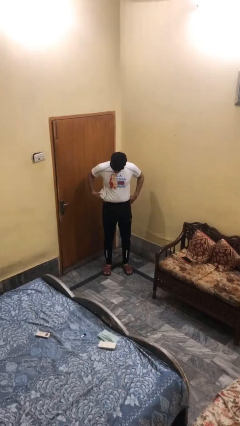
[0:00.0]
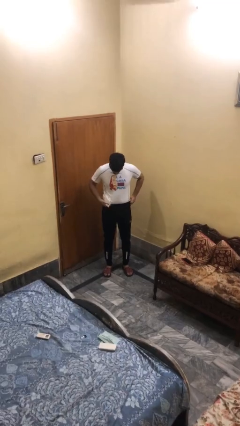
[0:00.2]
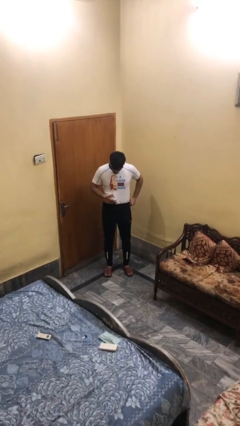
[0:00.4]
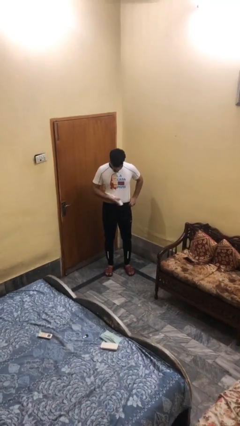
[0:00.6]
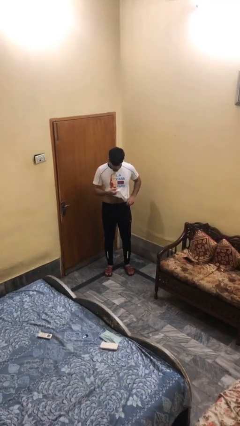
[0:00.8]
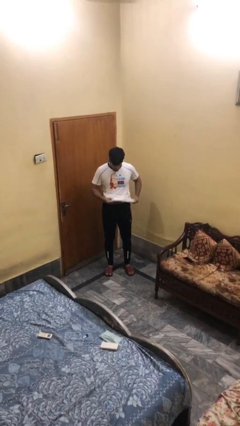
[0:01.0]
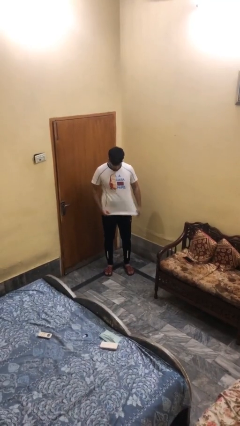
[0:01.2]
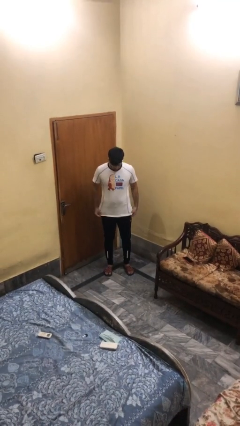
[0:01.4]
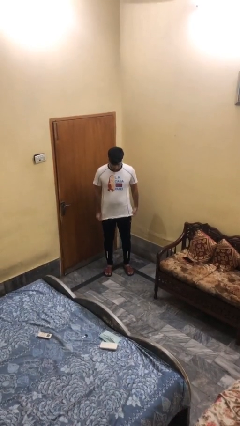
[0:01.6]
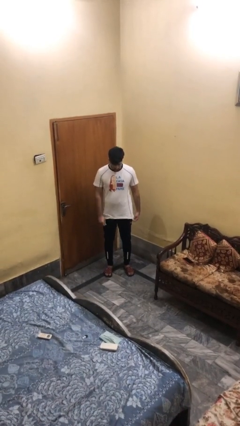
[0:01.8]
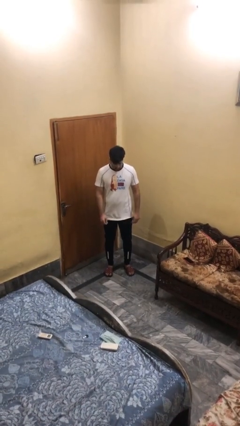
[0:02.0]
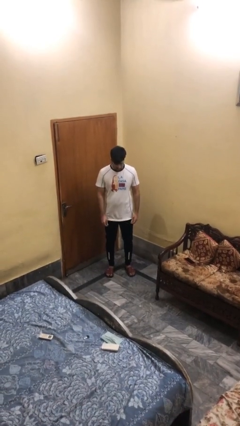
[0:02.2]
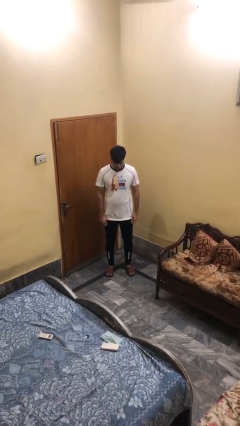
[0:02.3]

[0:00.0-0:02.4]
person untucks shirt

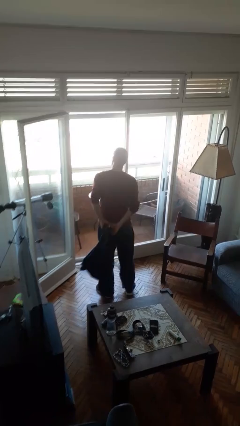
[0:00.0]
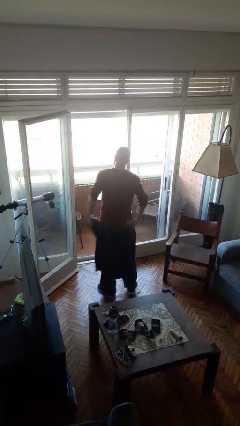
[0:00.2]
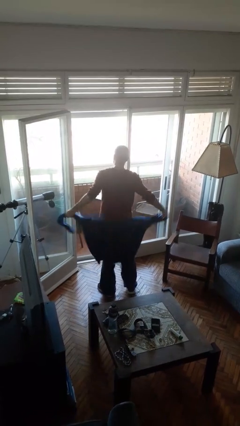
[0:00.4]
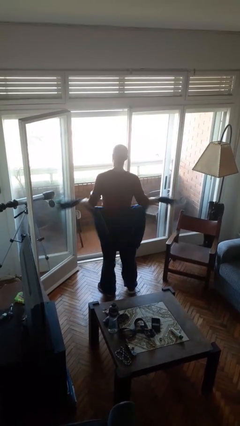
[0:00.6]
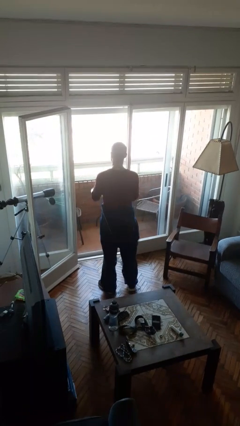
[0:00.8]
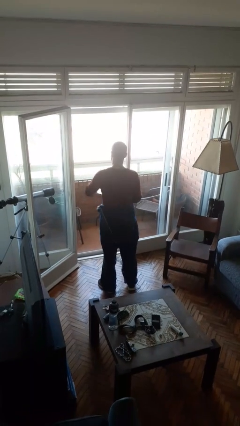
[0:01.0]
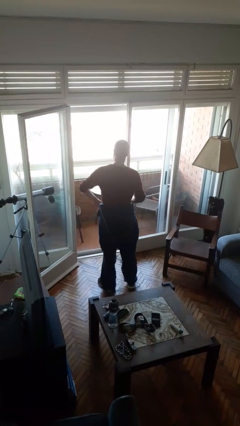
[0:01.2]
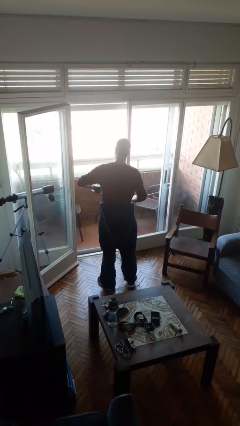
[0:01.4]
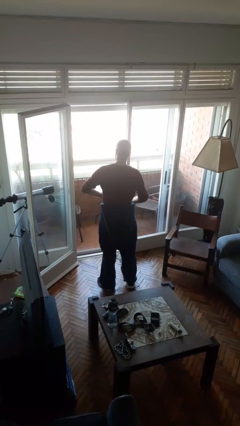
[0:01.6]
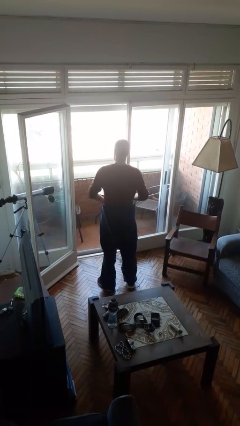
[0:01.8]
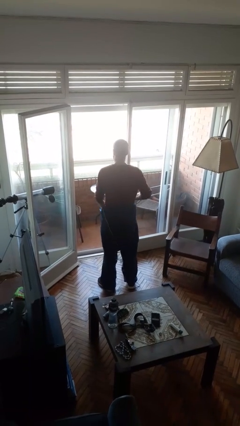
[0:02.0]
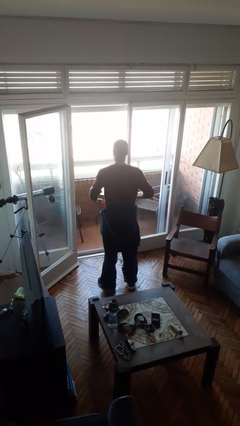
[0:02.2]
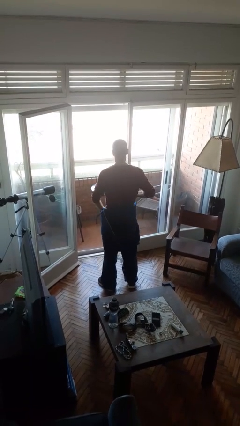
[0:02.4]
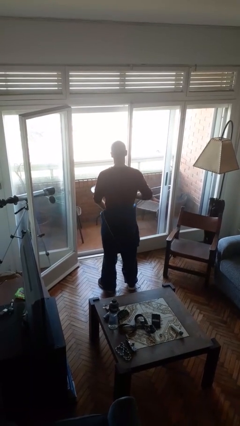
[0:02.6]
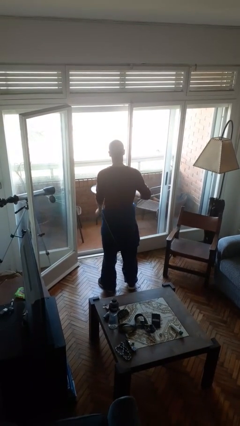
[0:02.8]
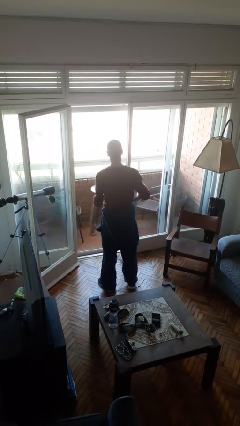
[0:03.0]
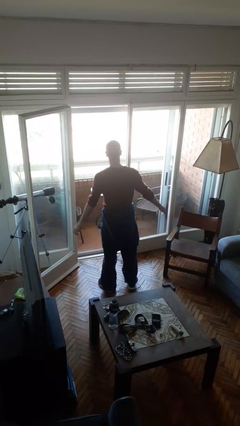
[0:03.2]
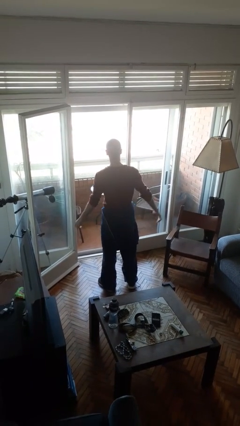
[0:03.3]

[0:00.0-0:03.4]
person ties jacket around waist

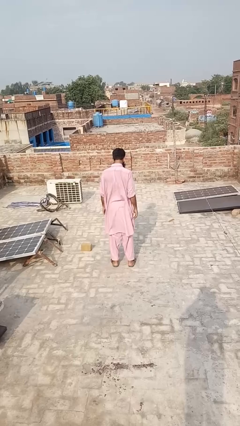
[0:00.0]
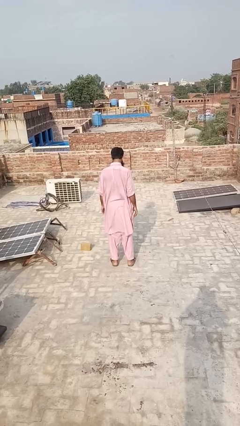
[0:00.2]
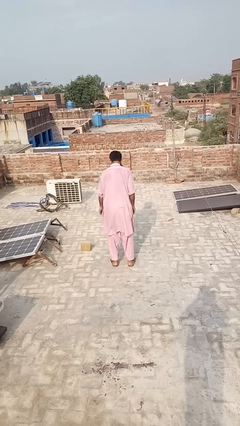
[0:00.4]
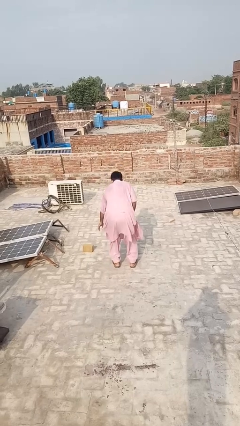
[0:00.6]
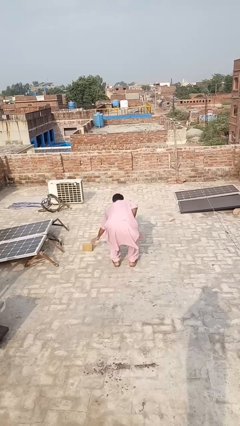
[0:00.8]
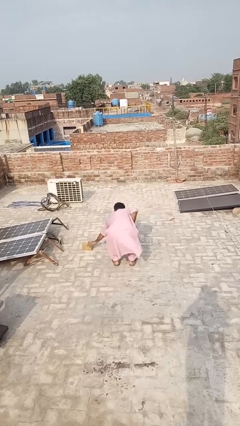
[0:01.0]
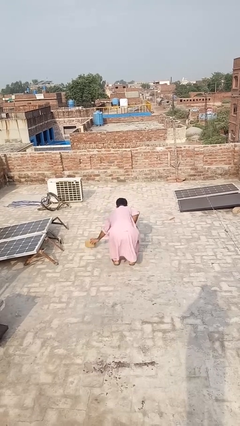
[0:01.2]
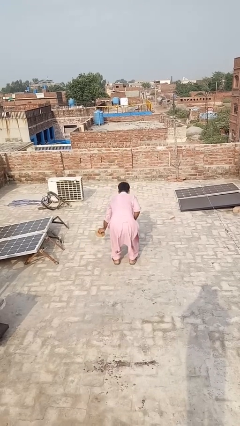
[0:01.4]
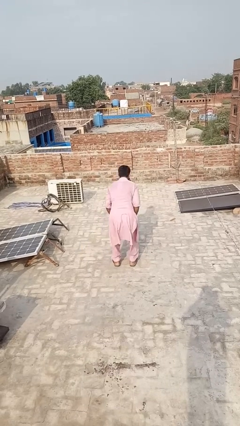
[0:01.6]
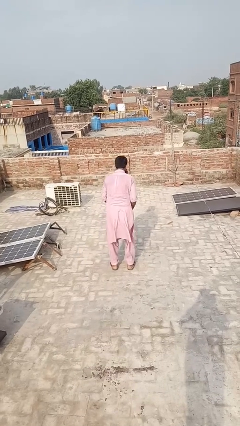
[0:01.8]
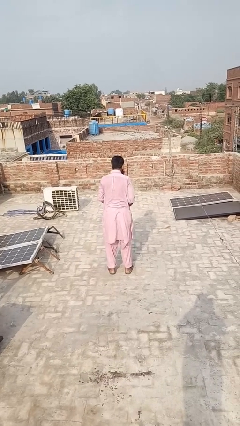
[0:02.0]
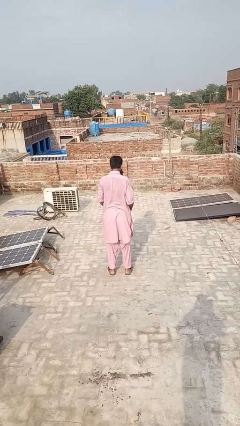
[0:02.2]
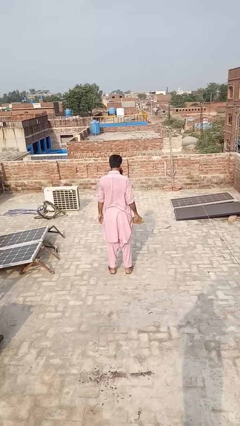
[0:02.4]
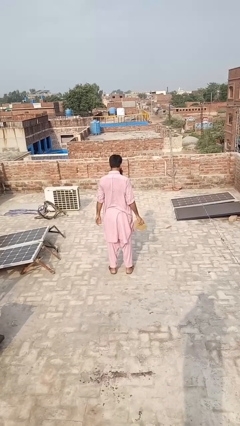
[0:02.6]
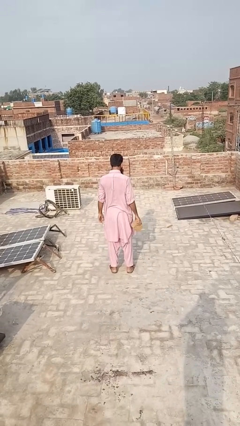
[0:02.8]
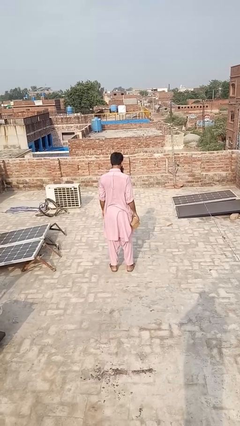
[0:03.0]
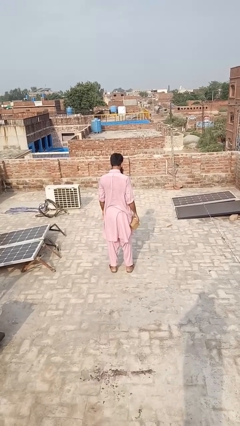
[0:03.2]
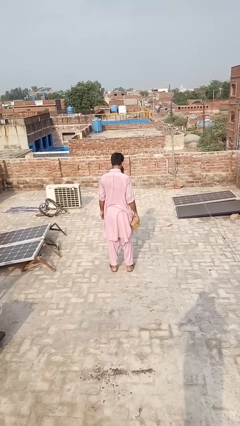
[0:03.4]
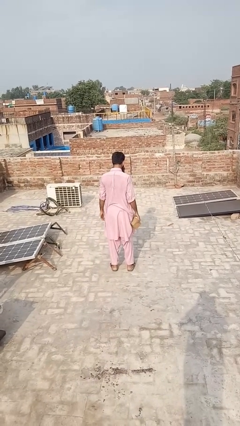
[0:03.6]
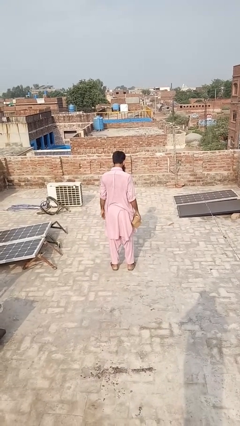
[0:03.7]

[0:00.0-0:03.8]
person picks up object from floor

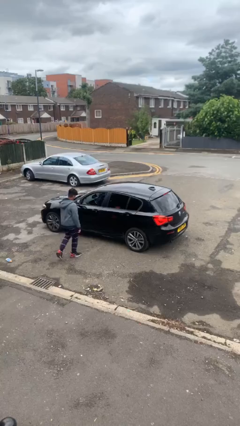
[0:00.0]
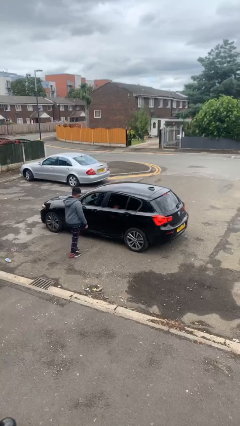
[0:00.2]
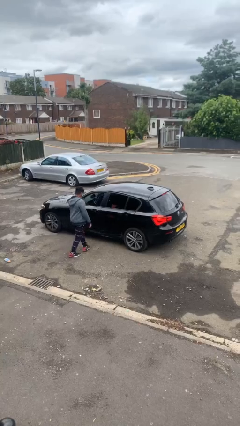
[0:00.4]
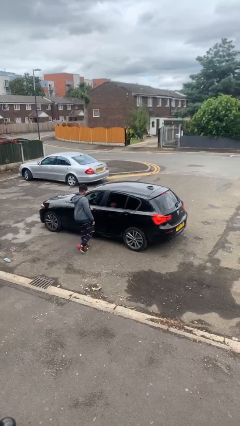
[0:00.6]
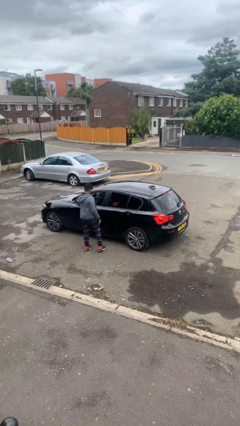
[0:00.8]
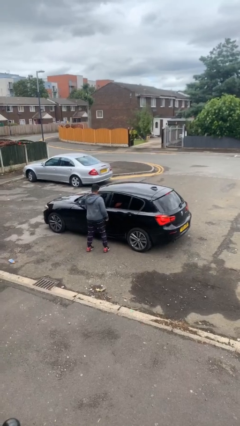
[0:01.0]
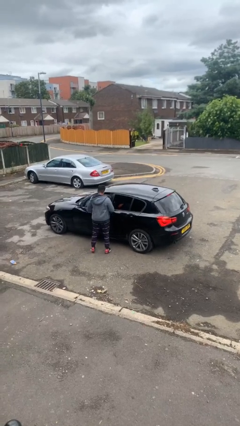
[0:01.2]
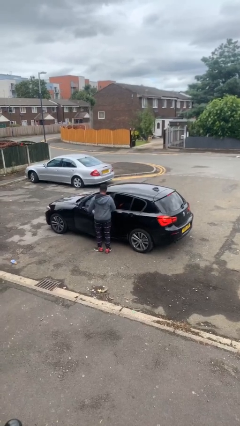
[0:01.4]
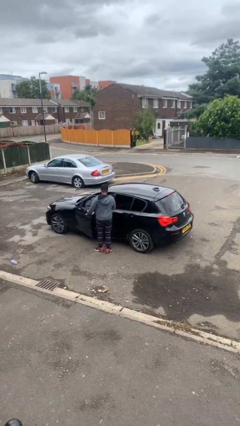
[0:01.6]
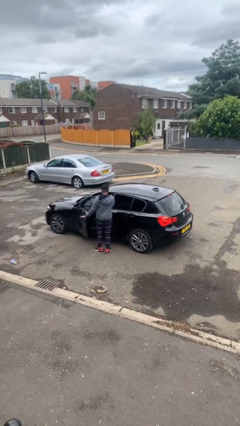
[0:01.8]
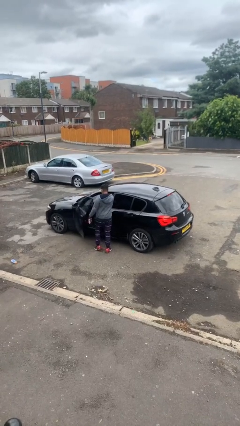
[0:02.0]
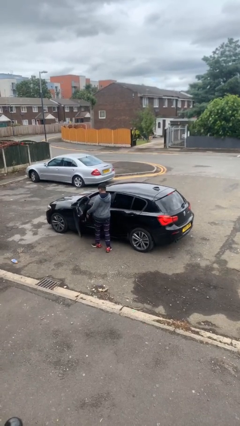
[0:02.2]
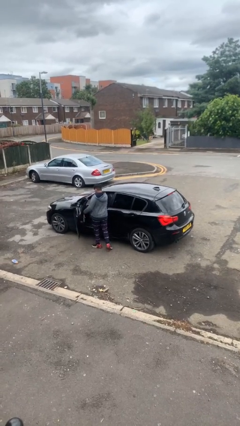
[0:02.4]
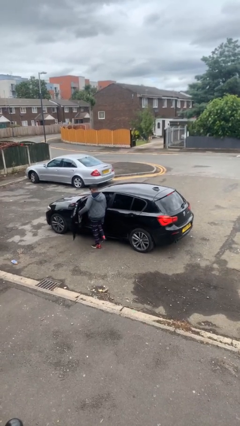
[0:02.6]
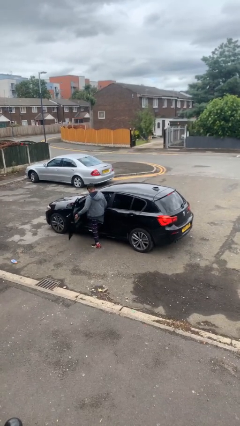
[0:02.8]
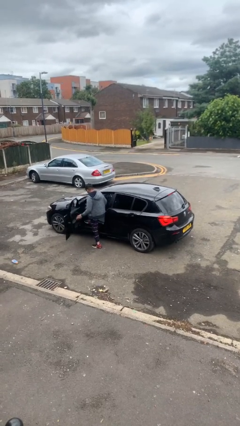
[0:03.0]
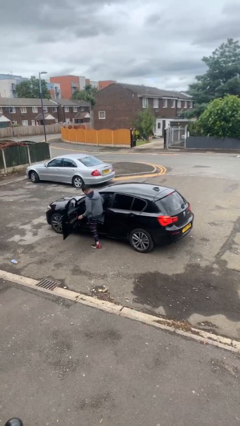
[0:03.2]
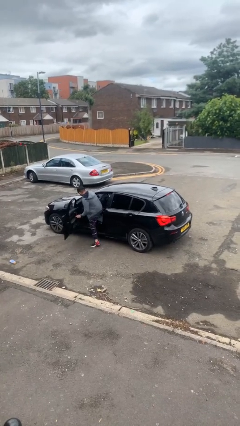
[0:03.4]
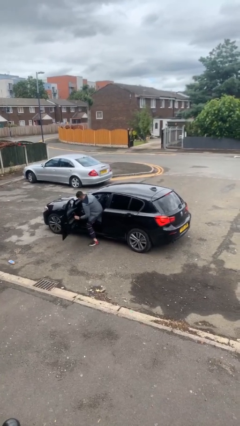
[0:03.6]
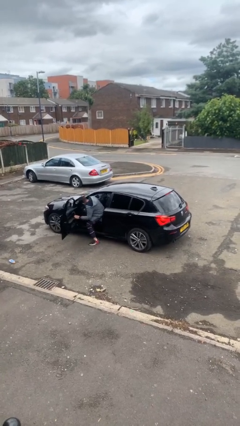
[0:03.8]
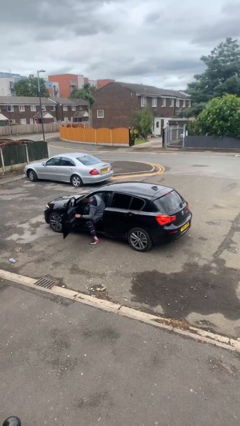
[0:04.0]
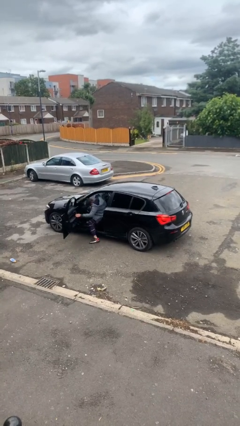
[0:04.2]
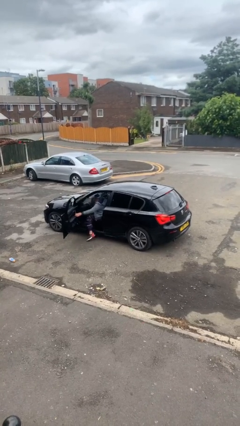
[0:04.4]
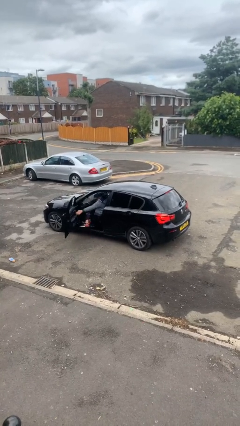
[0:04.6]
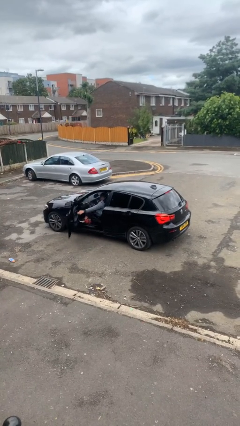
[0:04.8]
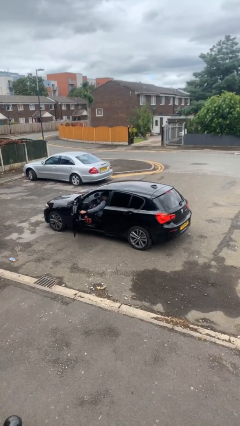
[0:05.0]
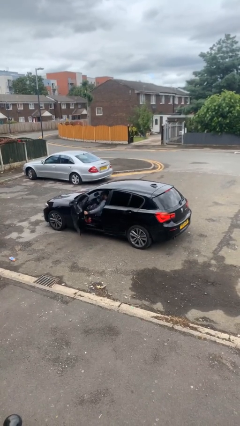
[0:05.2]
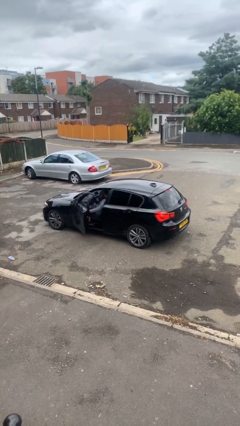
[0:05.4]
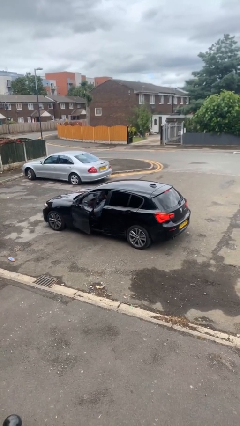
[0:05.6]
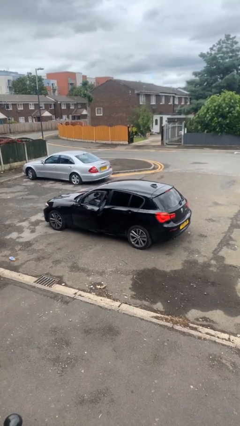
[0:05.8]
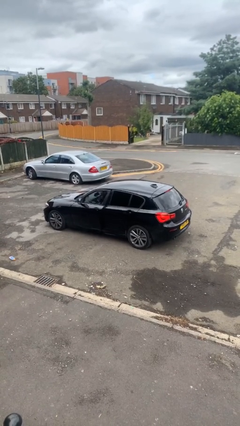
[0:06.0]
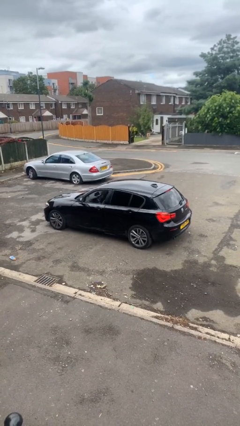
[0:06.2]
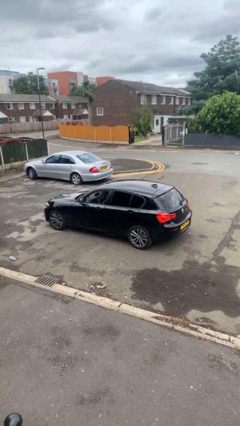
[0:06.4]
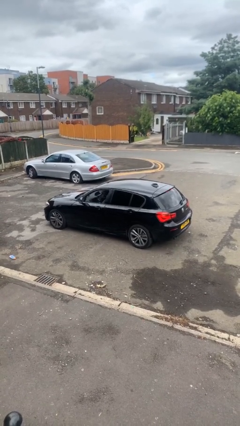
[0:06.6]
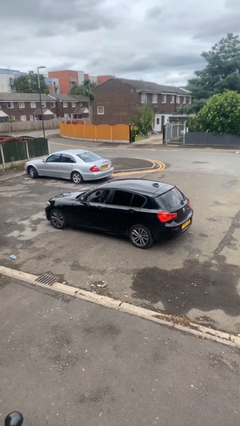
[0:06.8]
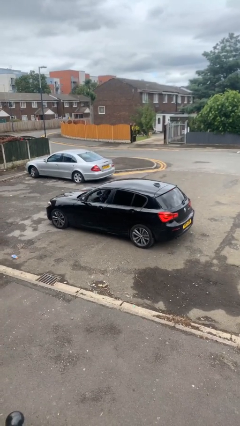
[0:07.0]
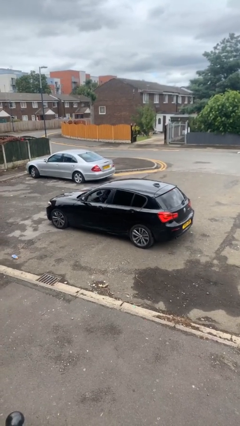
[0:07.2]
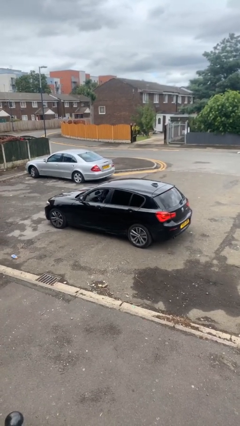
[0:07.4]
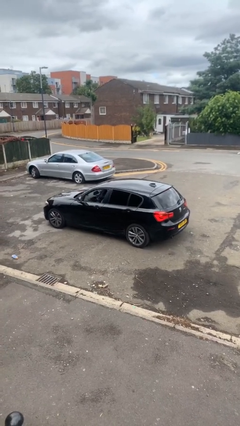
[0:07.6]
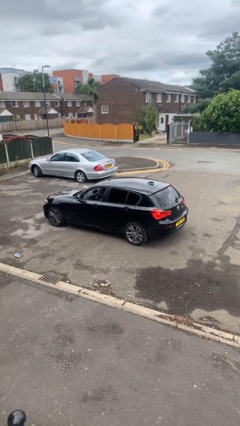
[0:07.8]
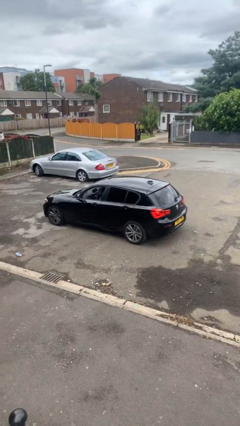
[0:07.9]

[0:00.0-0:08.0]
car picks up person

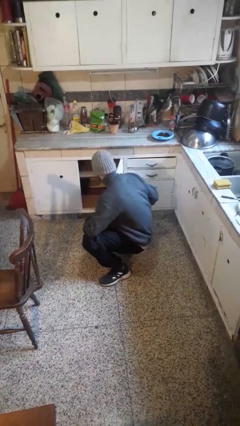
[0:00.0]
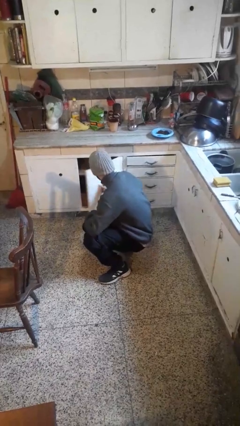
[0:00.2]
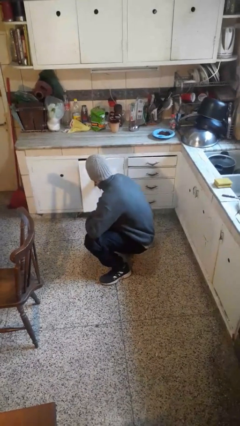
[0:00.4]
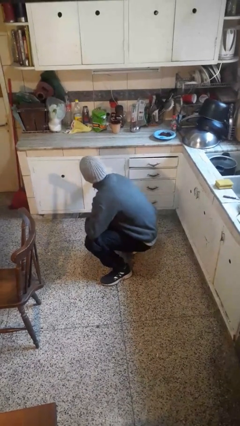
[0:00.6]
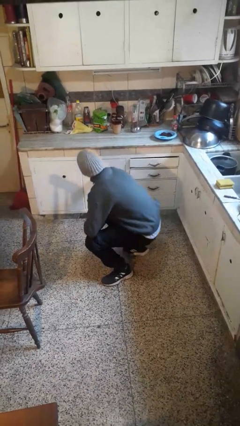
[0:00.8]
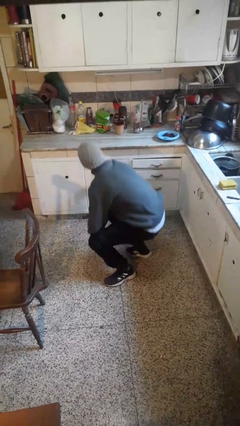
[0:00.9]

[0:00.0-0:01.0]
person closes cabinet
